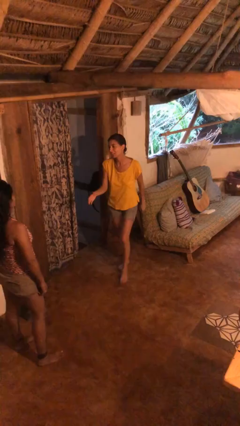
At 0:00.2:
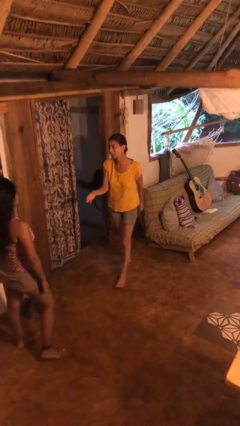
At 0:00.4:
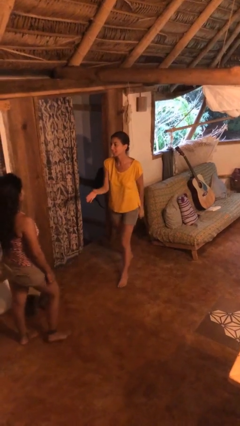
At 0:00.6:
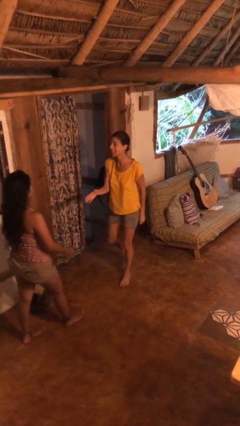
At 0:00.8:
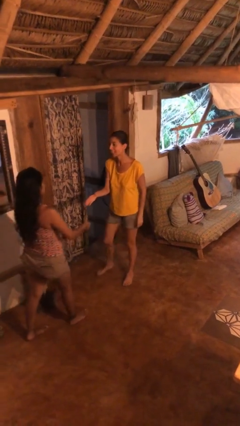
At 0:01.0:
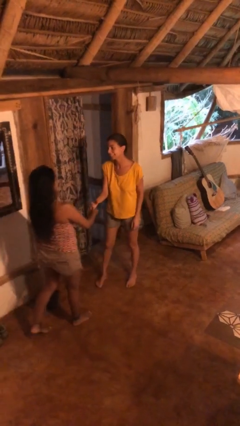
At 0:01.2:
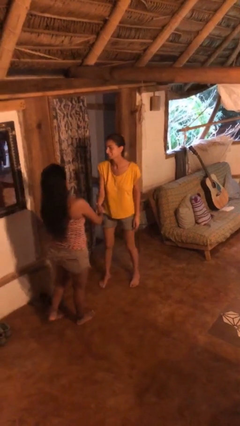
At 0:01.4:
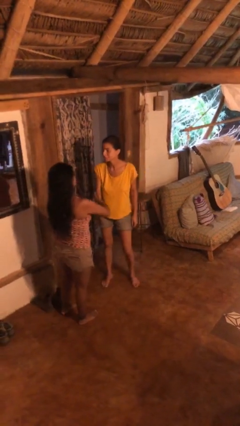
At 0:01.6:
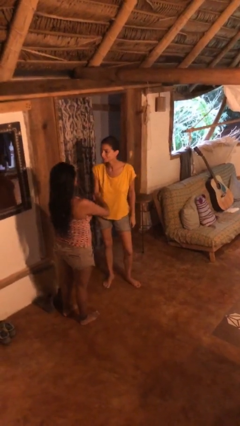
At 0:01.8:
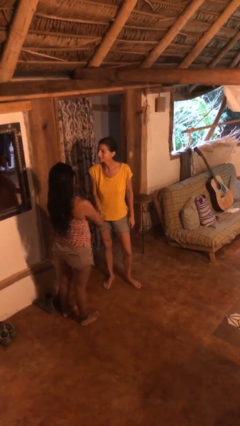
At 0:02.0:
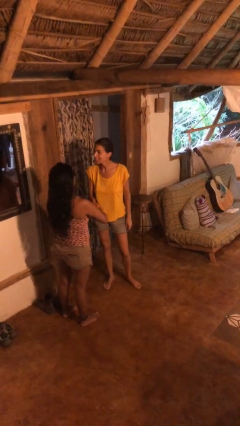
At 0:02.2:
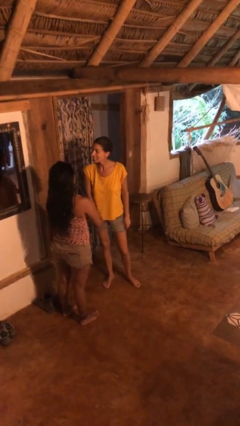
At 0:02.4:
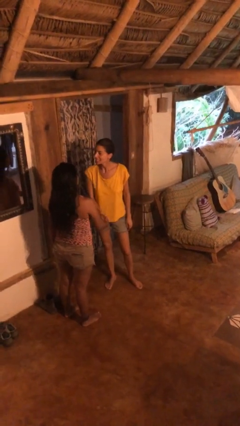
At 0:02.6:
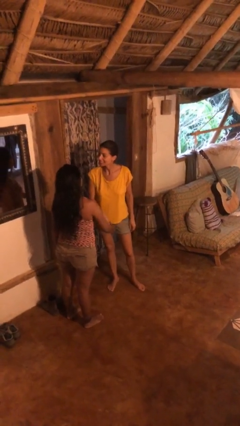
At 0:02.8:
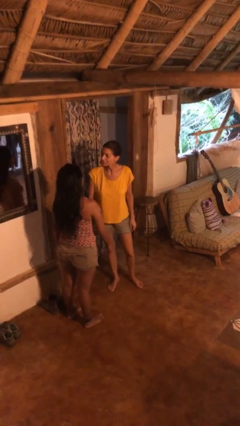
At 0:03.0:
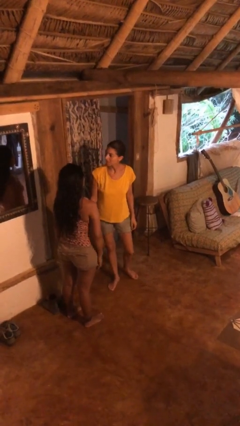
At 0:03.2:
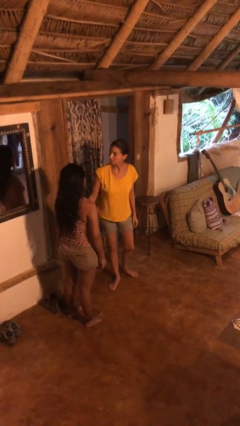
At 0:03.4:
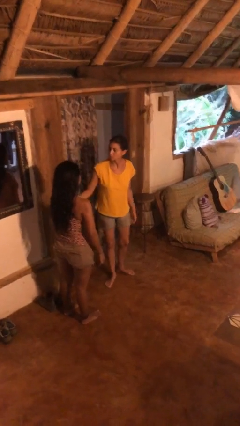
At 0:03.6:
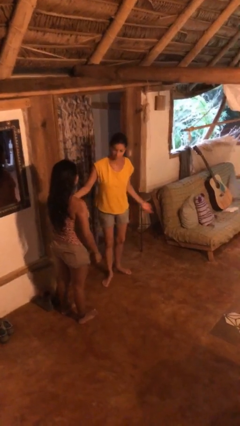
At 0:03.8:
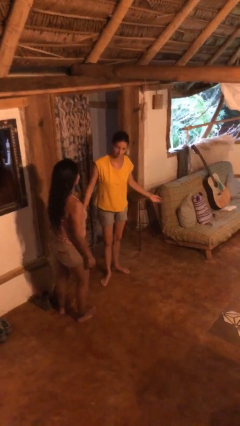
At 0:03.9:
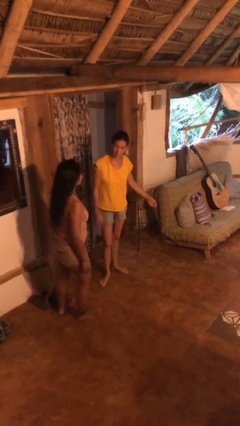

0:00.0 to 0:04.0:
person shakes hand

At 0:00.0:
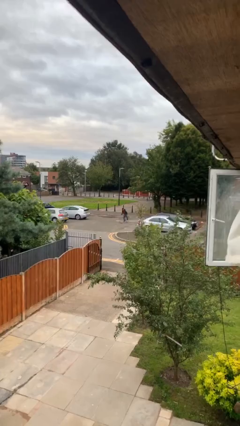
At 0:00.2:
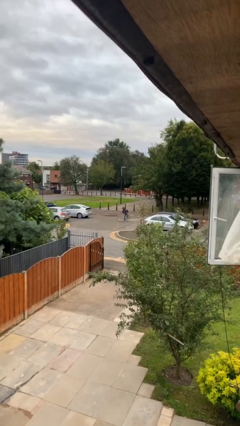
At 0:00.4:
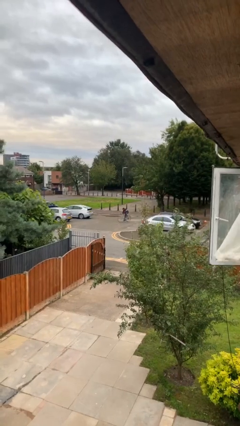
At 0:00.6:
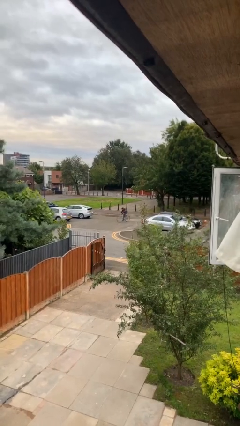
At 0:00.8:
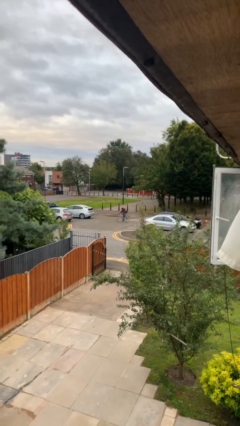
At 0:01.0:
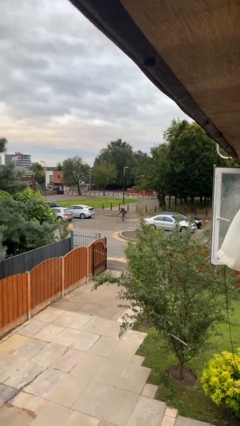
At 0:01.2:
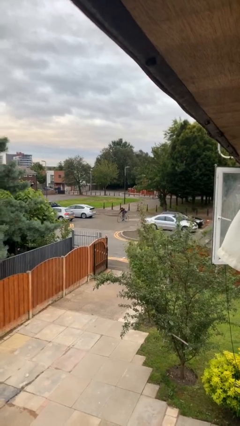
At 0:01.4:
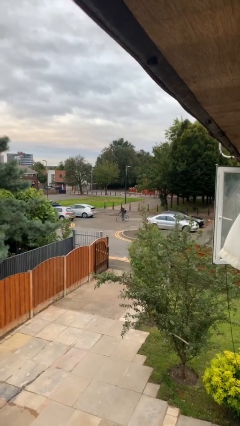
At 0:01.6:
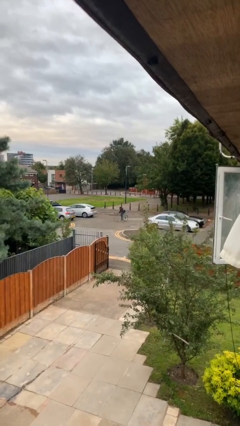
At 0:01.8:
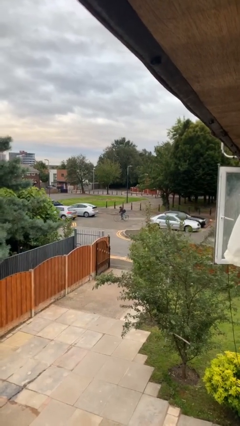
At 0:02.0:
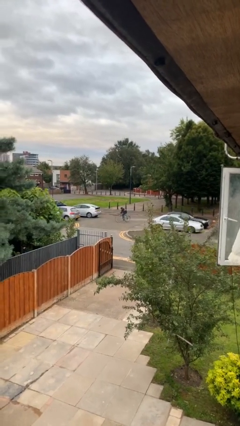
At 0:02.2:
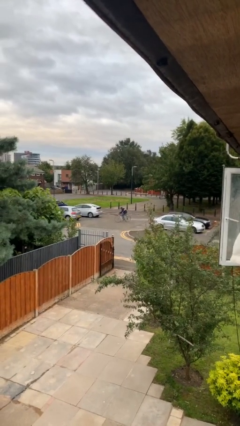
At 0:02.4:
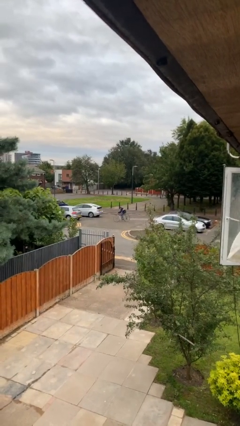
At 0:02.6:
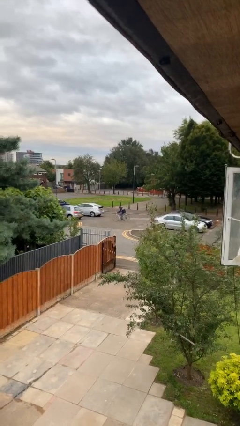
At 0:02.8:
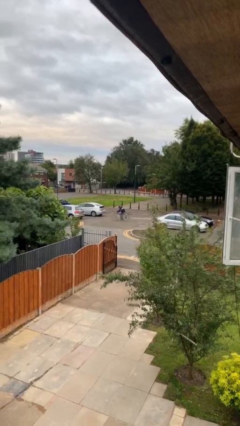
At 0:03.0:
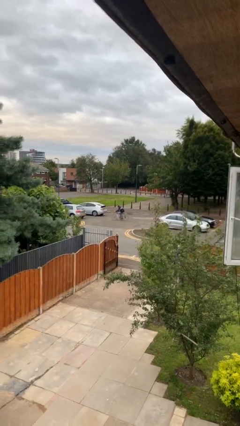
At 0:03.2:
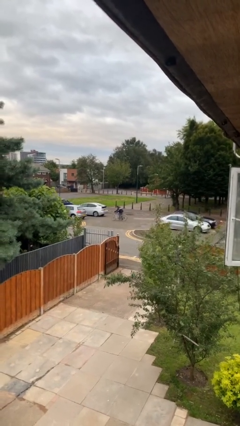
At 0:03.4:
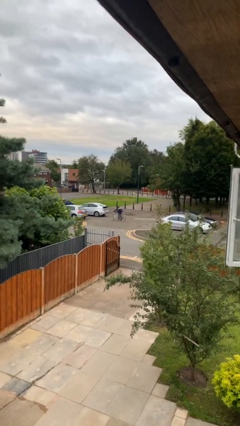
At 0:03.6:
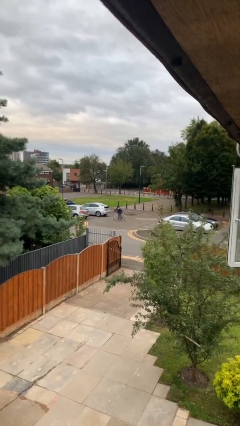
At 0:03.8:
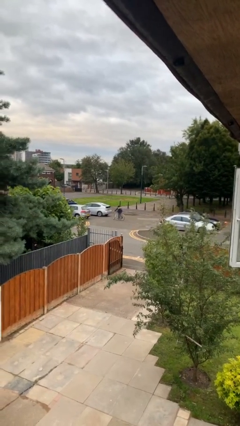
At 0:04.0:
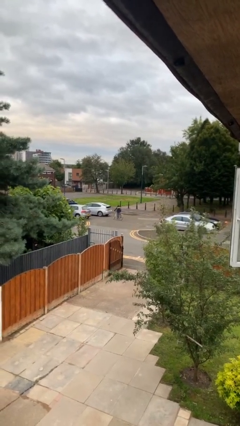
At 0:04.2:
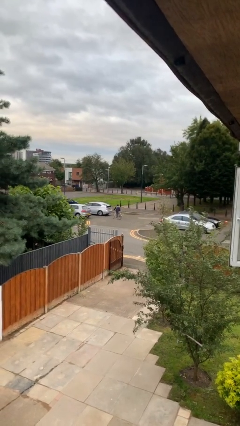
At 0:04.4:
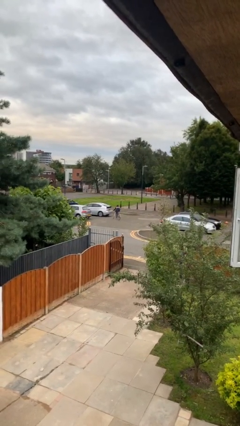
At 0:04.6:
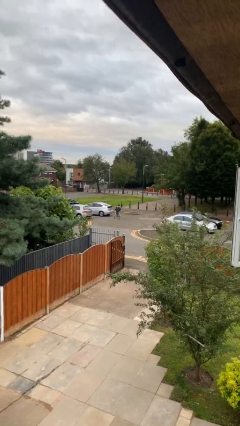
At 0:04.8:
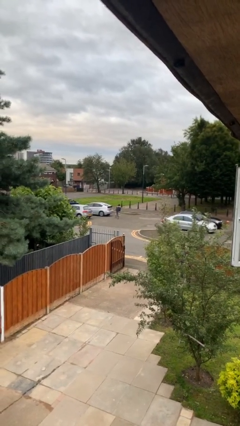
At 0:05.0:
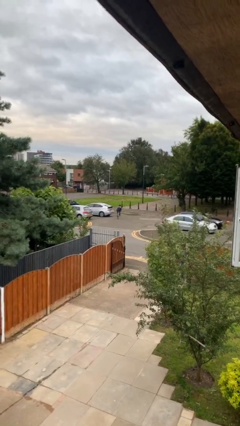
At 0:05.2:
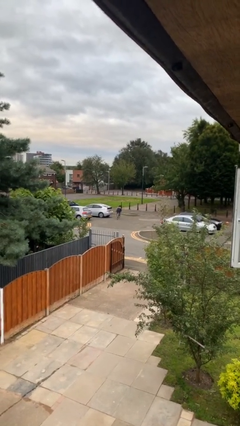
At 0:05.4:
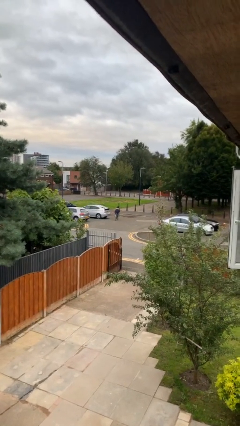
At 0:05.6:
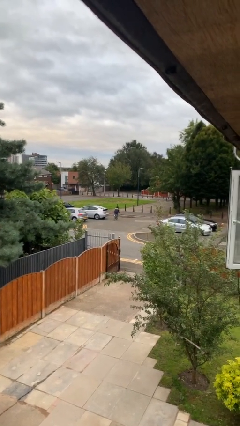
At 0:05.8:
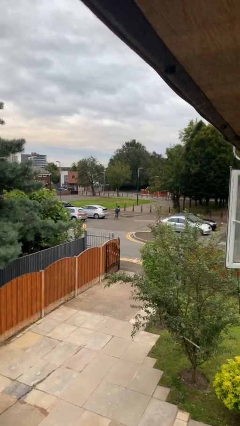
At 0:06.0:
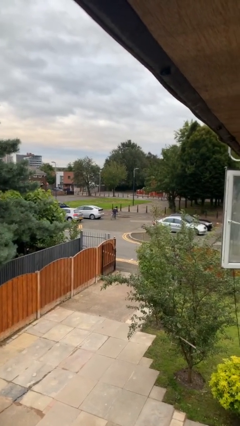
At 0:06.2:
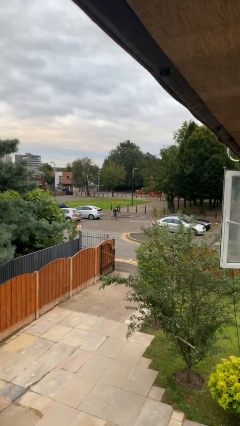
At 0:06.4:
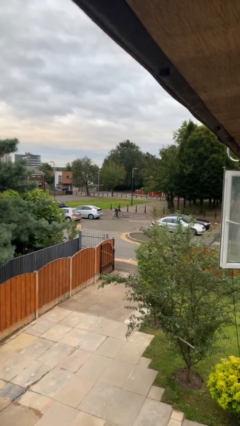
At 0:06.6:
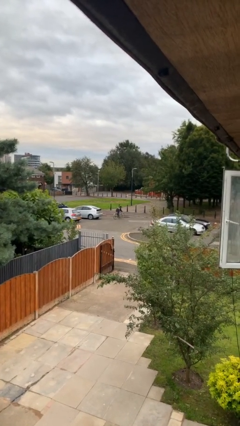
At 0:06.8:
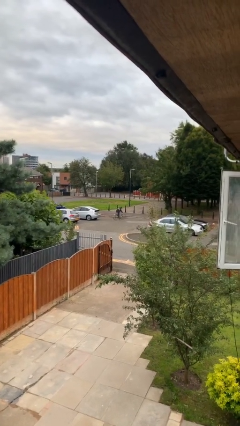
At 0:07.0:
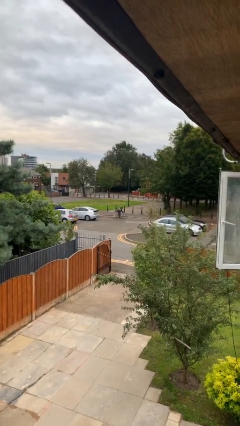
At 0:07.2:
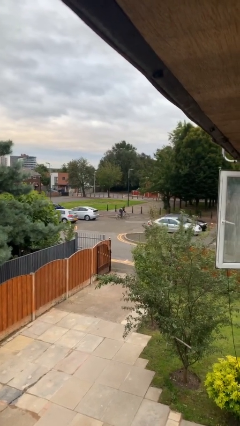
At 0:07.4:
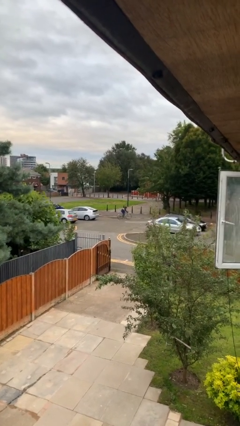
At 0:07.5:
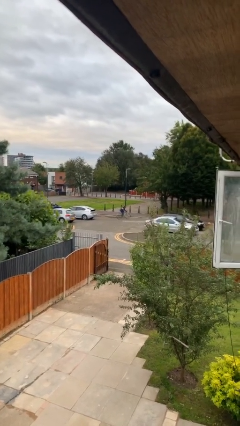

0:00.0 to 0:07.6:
person rides bicycle

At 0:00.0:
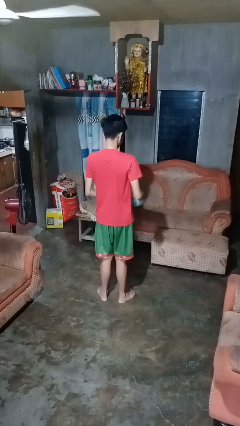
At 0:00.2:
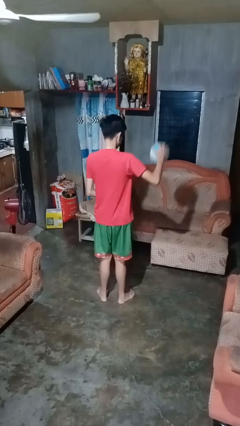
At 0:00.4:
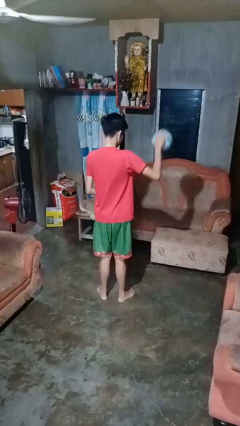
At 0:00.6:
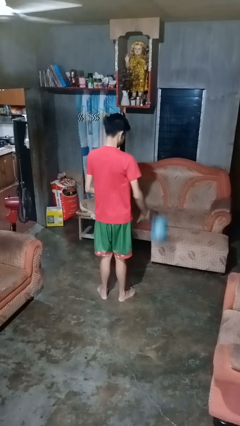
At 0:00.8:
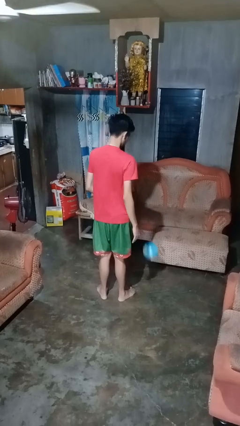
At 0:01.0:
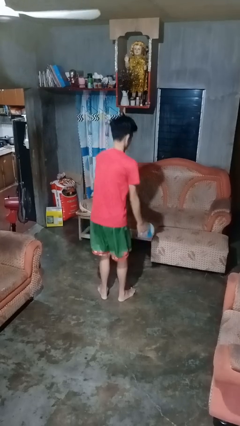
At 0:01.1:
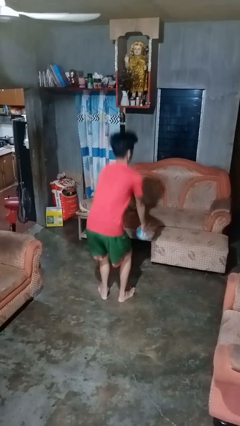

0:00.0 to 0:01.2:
person bounces ball on floor

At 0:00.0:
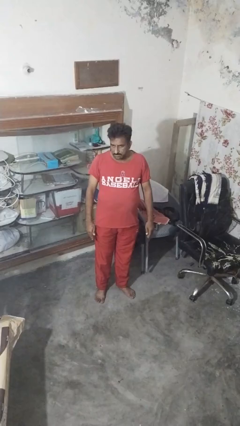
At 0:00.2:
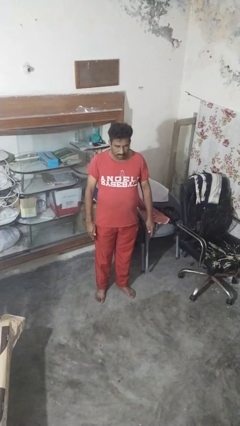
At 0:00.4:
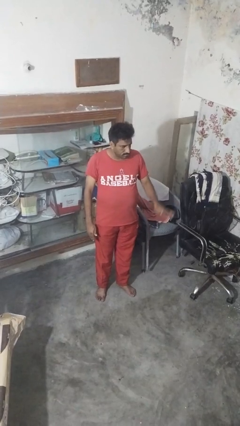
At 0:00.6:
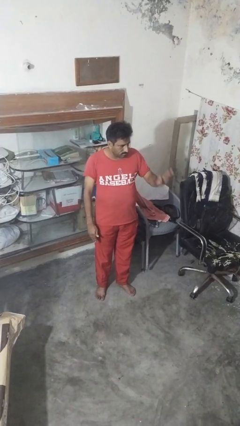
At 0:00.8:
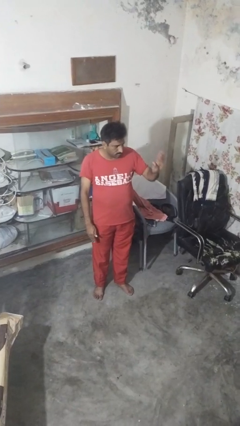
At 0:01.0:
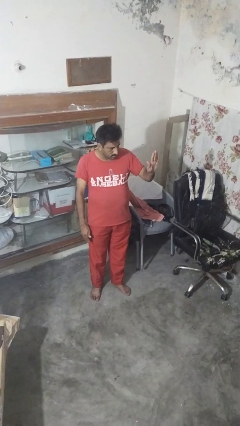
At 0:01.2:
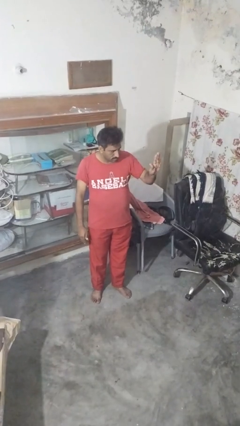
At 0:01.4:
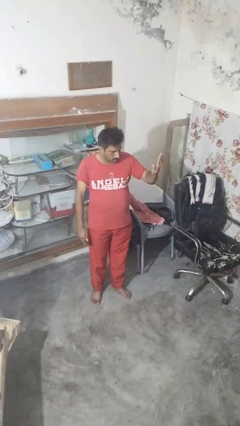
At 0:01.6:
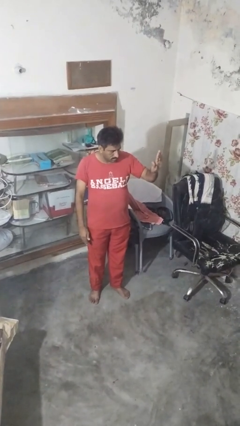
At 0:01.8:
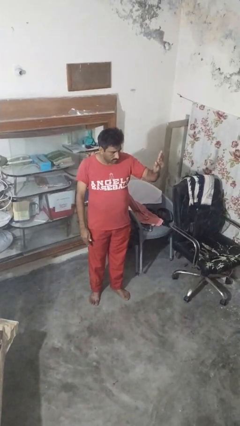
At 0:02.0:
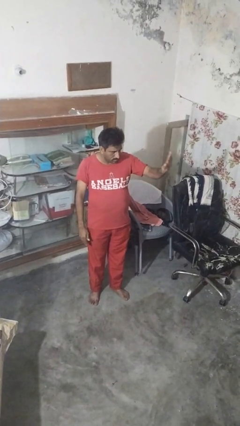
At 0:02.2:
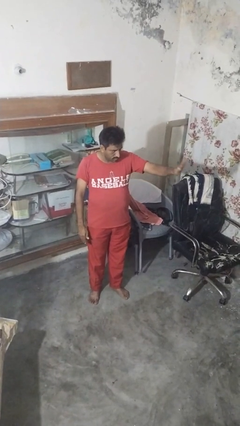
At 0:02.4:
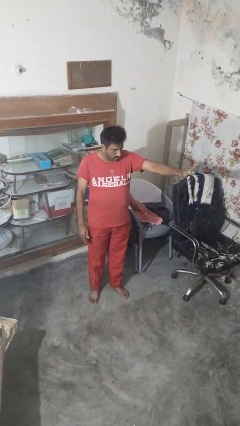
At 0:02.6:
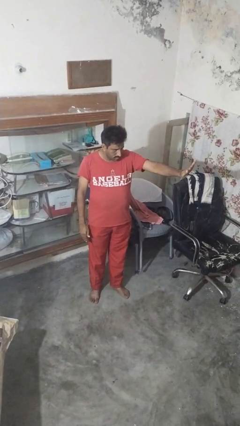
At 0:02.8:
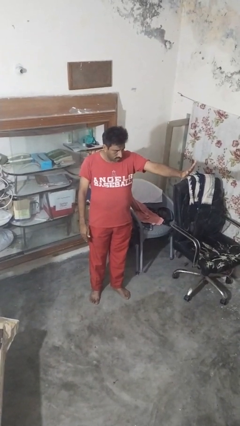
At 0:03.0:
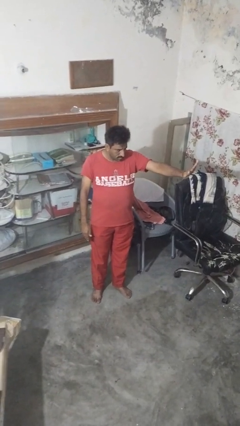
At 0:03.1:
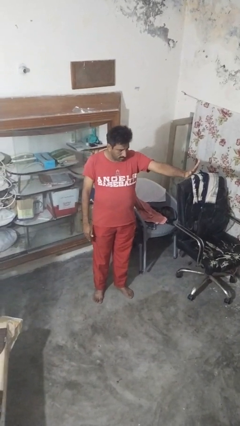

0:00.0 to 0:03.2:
person gestures stop

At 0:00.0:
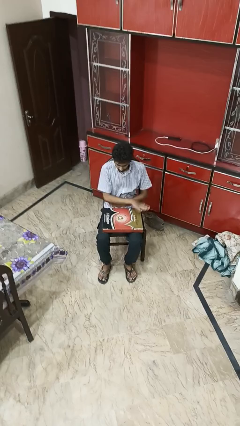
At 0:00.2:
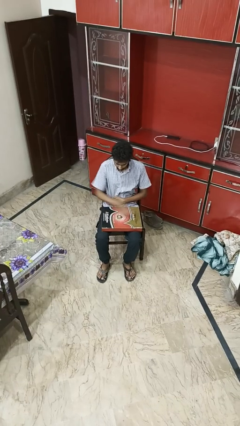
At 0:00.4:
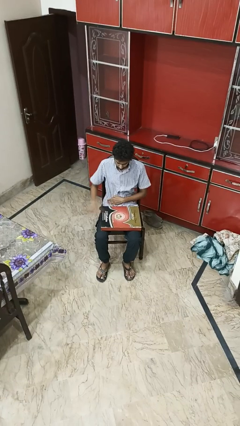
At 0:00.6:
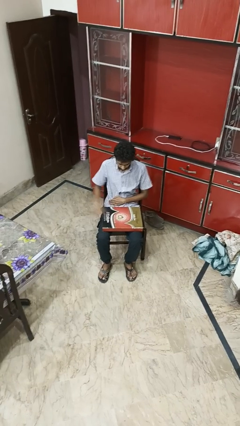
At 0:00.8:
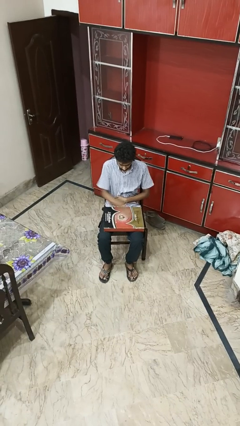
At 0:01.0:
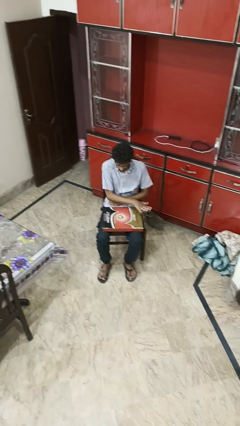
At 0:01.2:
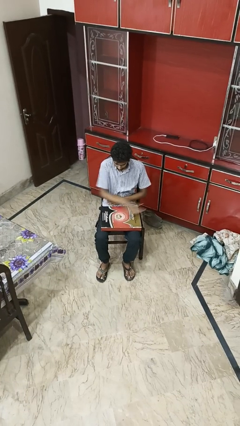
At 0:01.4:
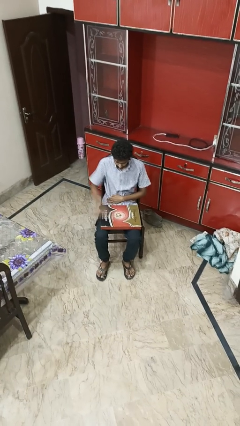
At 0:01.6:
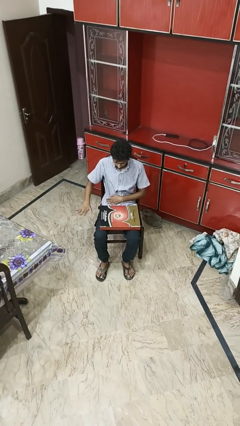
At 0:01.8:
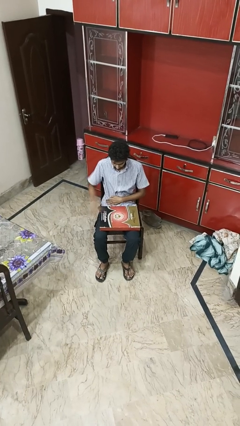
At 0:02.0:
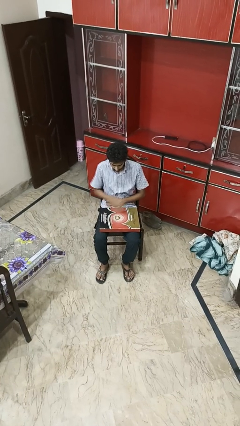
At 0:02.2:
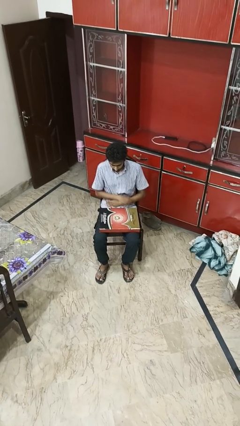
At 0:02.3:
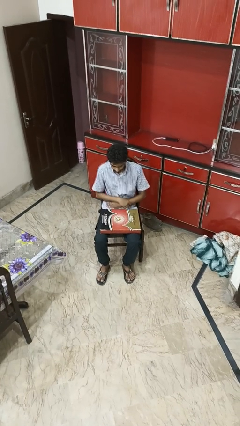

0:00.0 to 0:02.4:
person waves hand over object
